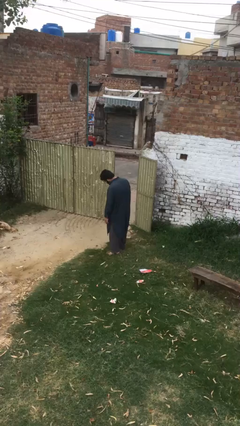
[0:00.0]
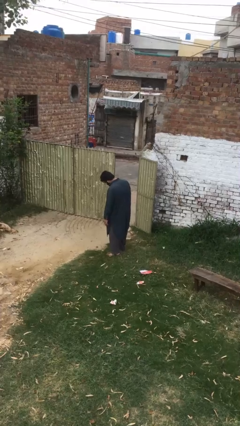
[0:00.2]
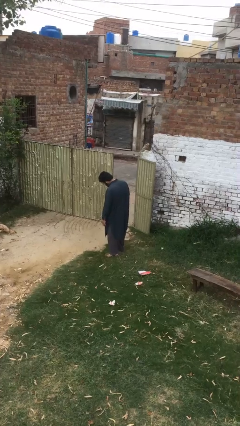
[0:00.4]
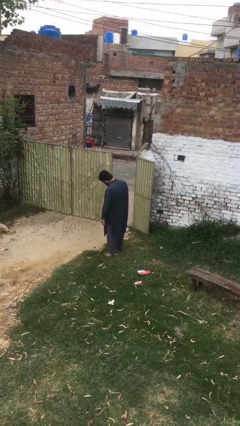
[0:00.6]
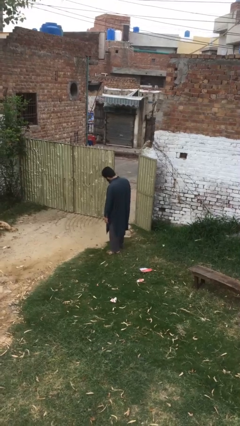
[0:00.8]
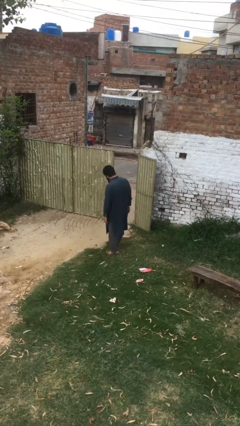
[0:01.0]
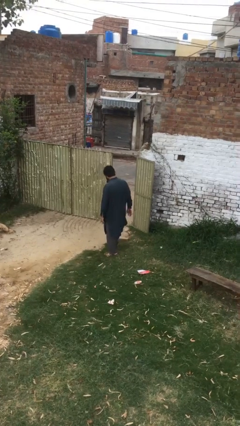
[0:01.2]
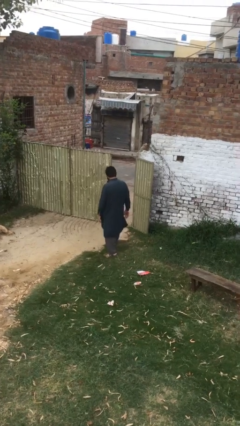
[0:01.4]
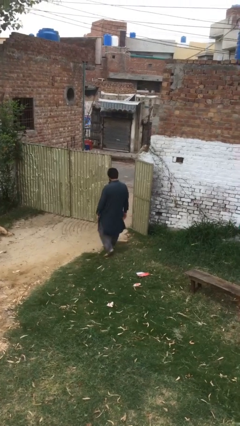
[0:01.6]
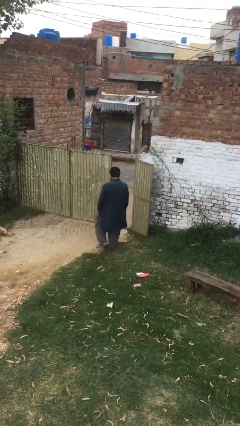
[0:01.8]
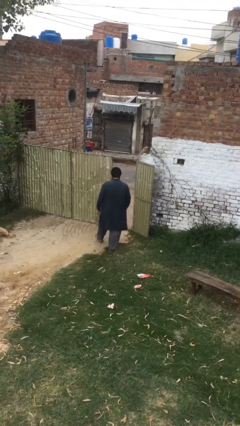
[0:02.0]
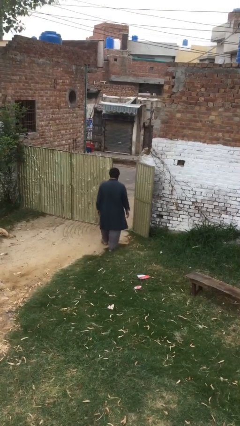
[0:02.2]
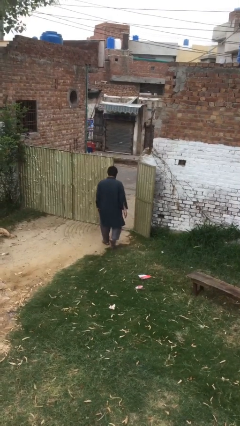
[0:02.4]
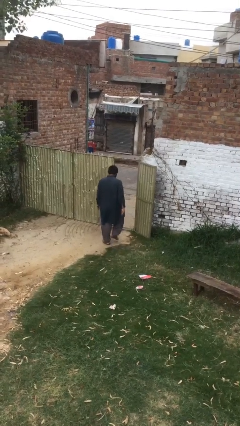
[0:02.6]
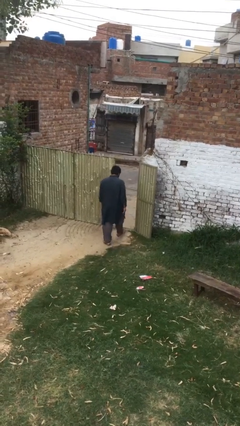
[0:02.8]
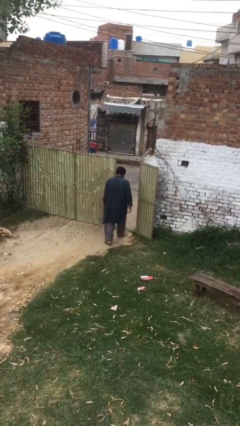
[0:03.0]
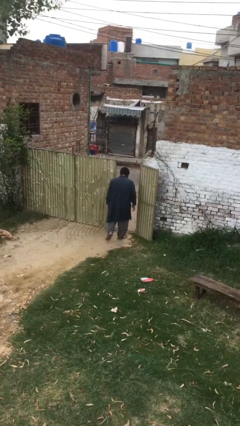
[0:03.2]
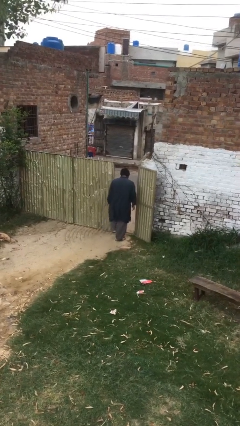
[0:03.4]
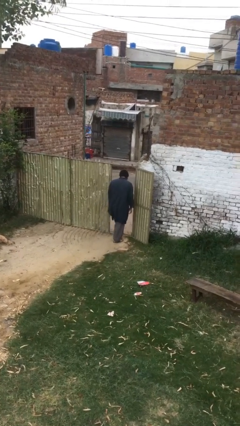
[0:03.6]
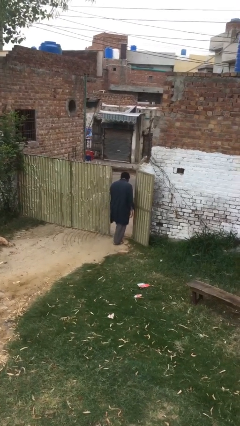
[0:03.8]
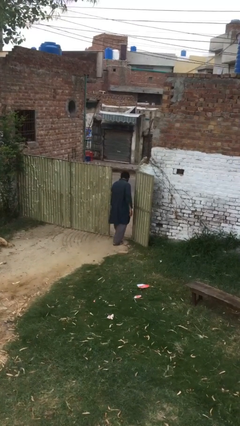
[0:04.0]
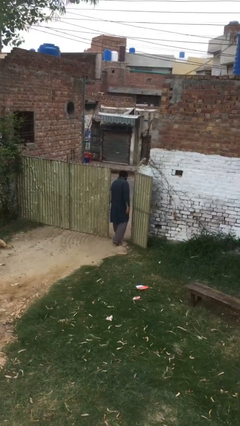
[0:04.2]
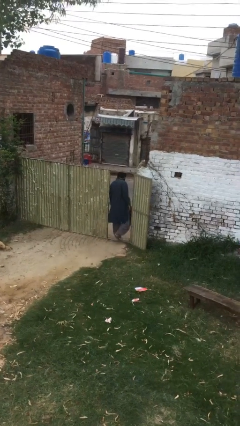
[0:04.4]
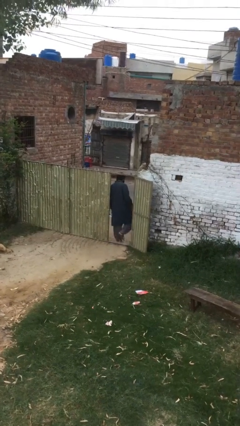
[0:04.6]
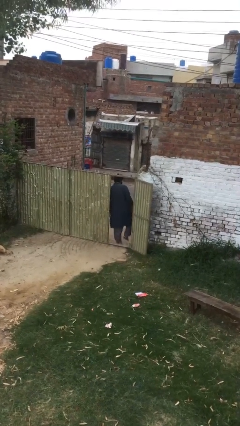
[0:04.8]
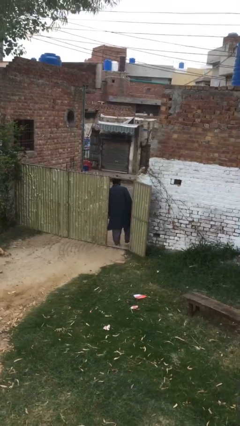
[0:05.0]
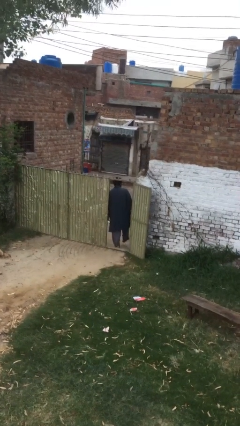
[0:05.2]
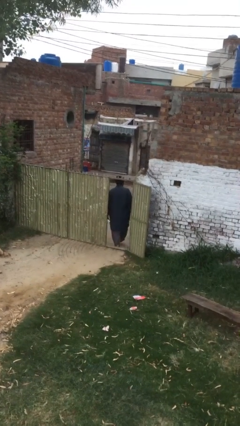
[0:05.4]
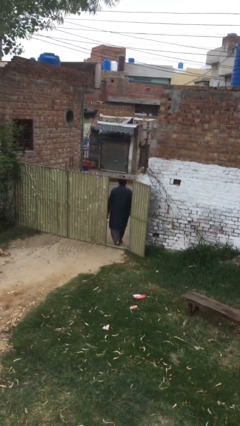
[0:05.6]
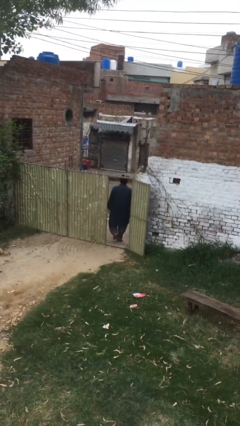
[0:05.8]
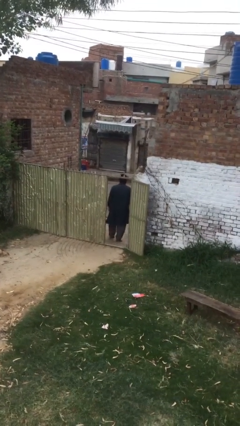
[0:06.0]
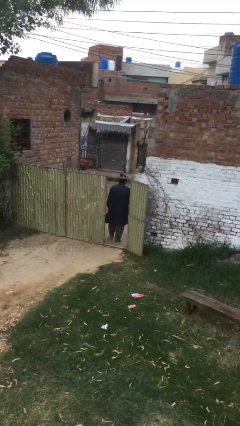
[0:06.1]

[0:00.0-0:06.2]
person exits scene through structure

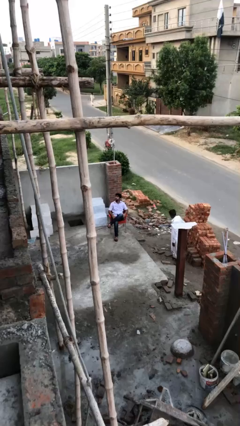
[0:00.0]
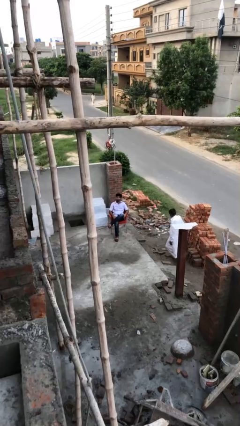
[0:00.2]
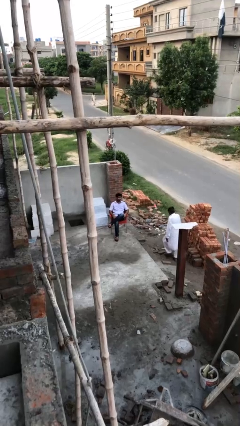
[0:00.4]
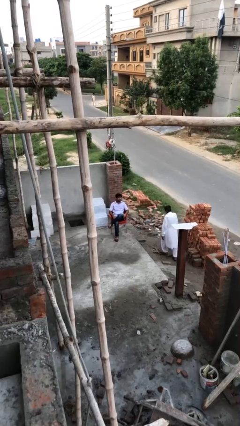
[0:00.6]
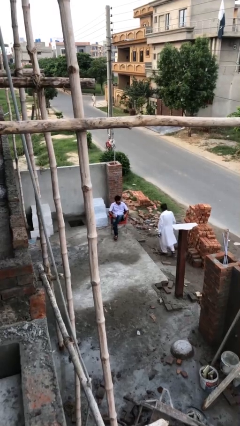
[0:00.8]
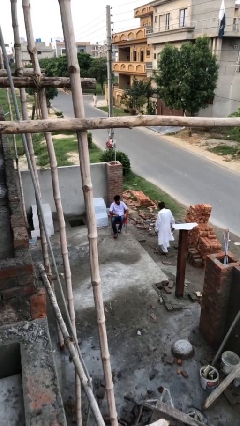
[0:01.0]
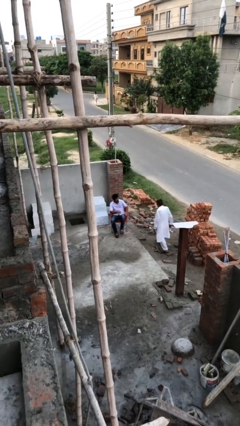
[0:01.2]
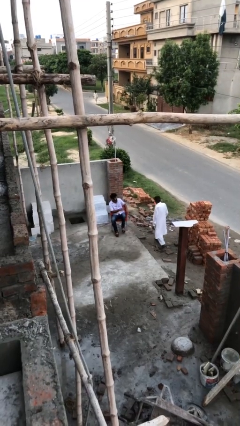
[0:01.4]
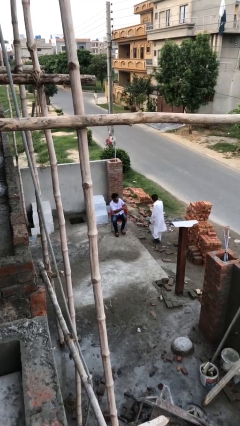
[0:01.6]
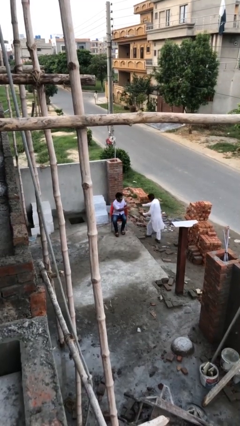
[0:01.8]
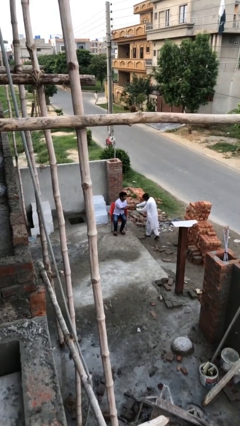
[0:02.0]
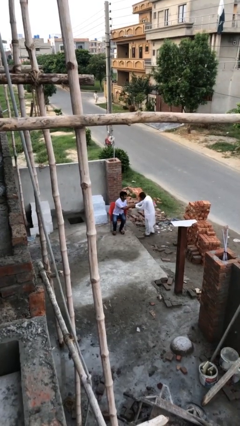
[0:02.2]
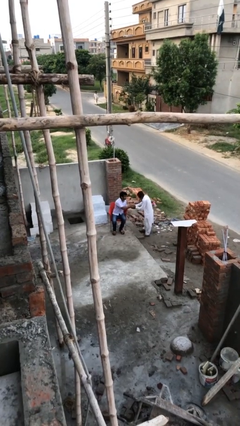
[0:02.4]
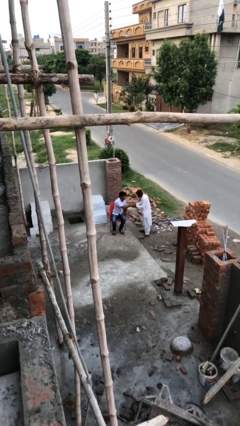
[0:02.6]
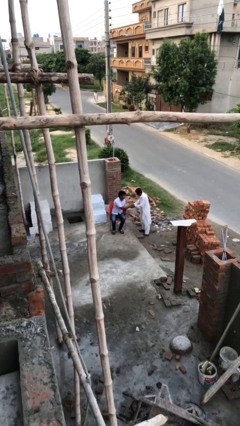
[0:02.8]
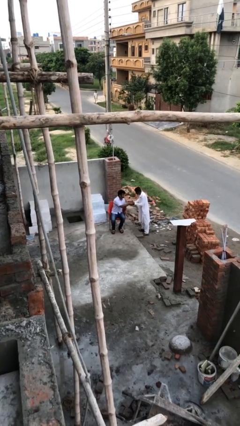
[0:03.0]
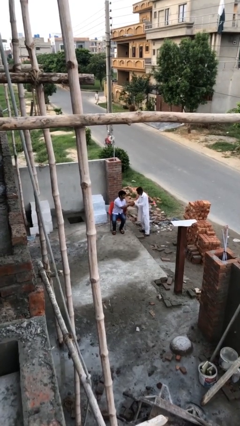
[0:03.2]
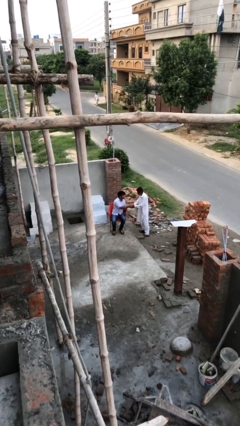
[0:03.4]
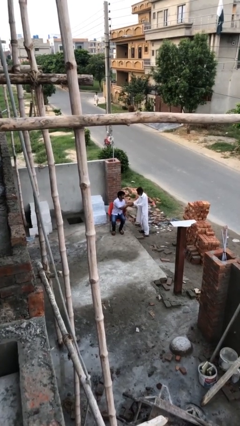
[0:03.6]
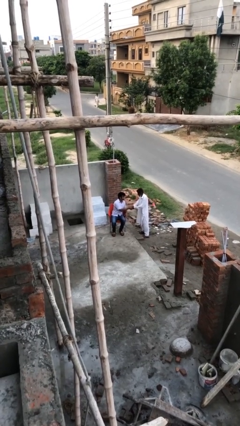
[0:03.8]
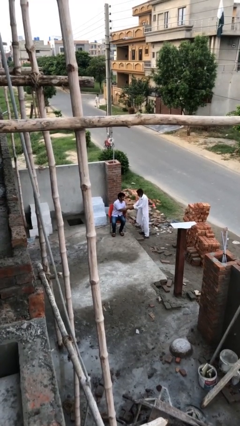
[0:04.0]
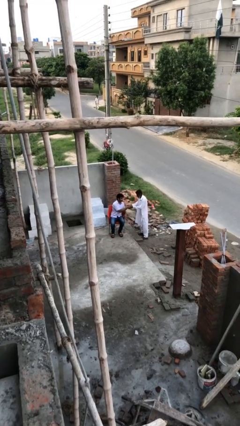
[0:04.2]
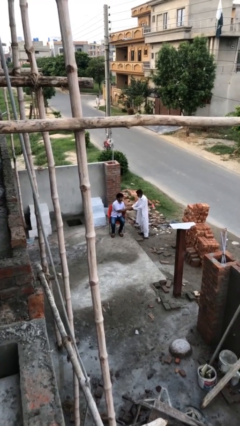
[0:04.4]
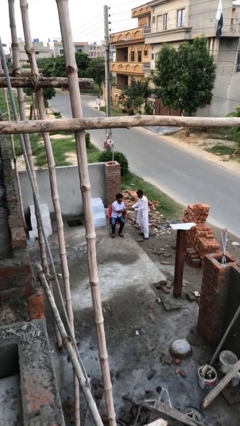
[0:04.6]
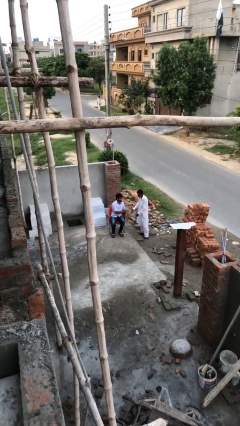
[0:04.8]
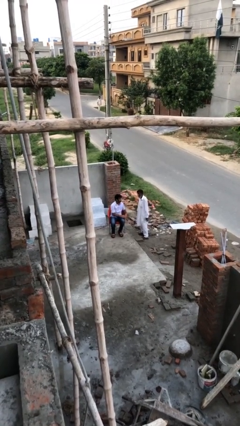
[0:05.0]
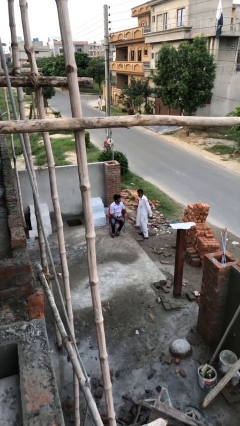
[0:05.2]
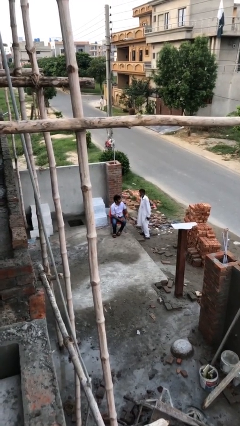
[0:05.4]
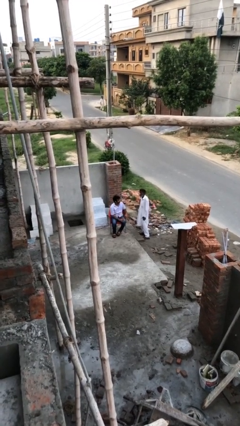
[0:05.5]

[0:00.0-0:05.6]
person shakes hand

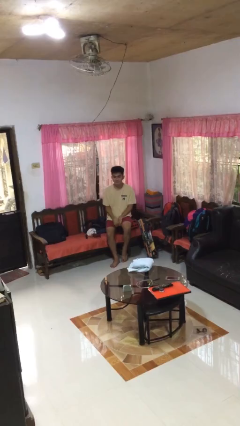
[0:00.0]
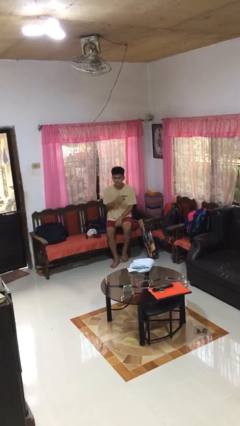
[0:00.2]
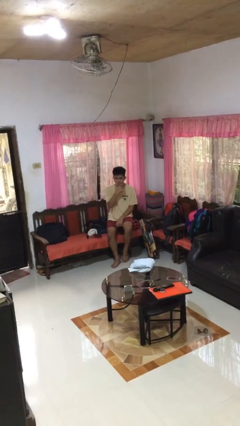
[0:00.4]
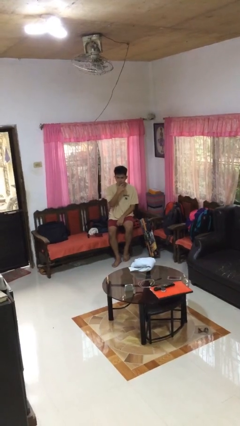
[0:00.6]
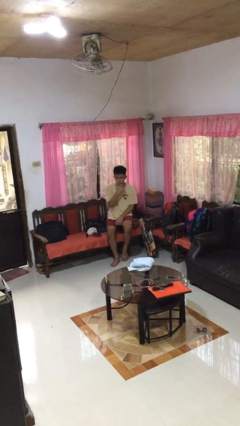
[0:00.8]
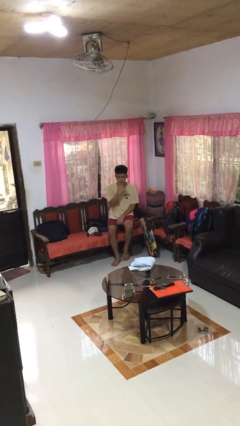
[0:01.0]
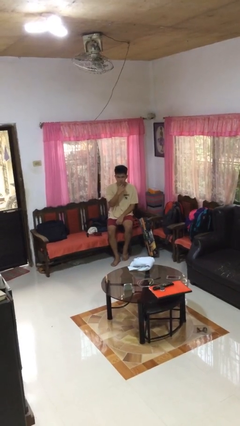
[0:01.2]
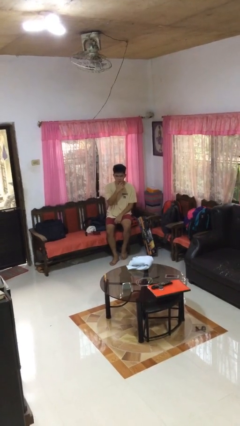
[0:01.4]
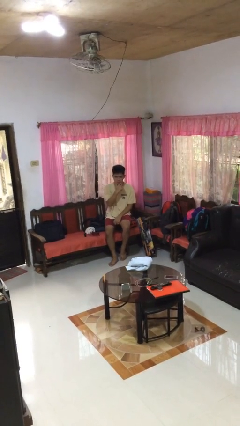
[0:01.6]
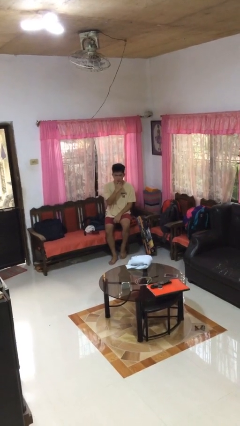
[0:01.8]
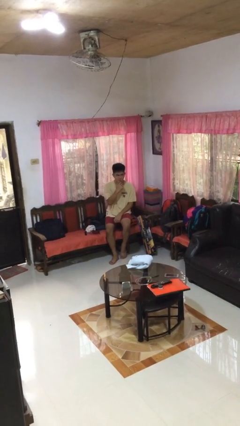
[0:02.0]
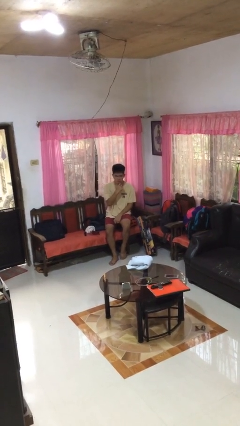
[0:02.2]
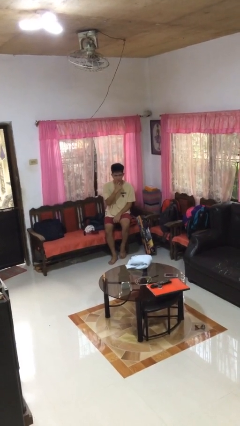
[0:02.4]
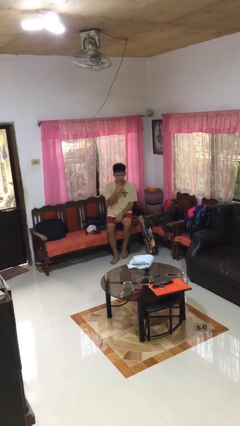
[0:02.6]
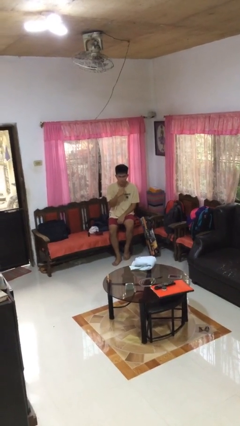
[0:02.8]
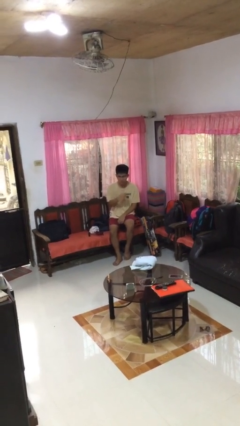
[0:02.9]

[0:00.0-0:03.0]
person strokes chin

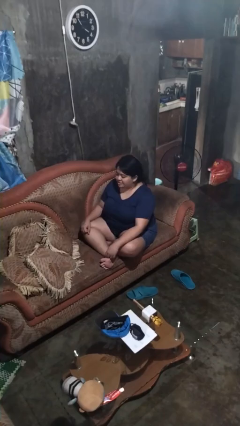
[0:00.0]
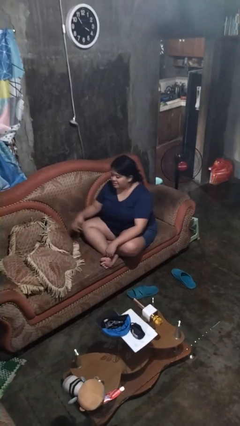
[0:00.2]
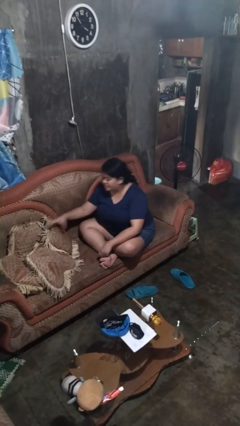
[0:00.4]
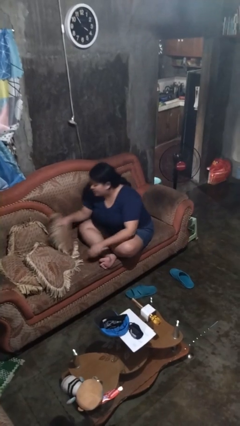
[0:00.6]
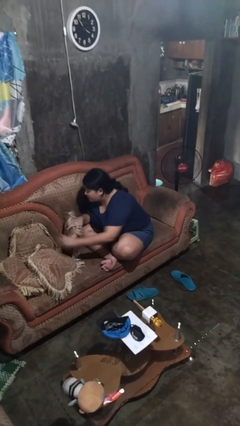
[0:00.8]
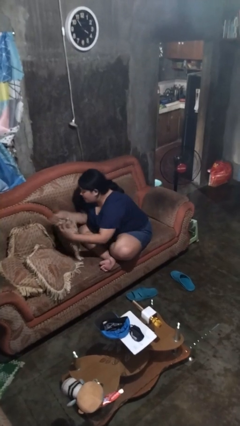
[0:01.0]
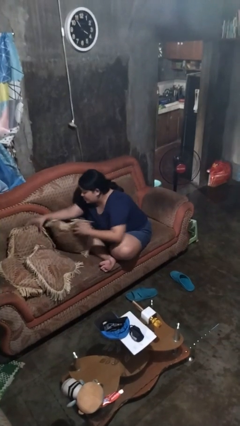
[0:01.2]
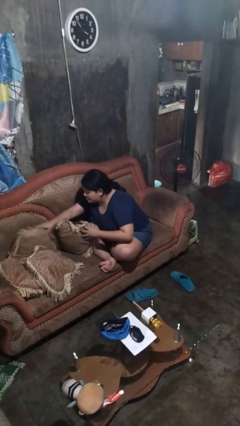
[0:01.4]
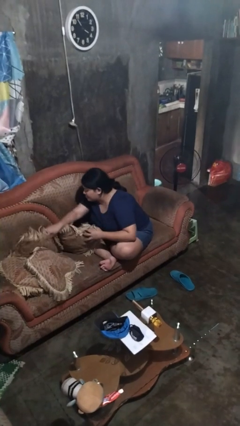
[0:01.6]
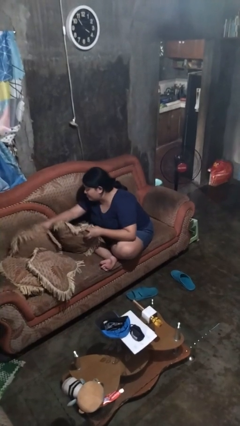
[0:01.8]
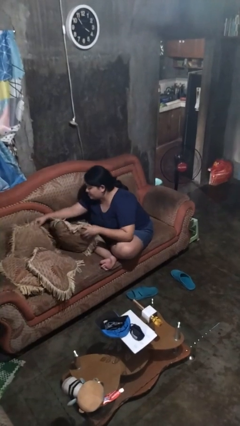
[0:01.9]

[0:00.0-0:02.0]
person searches in couch

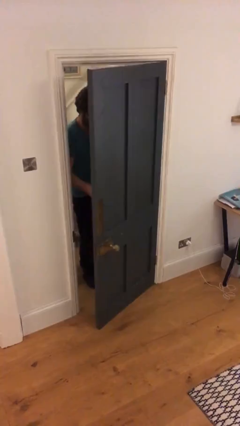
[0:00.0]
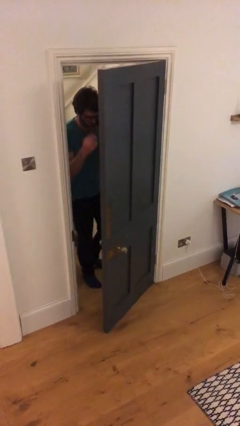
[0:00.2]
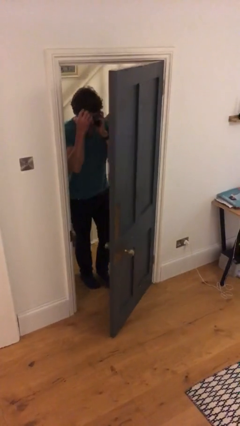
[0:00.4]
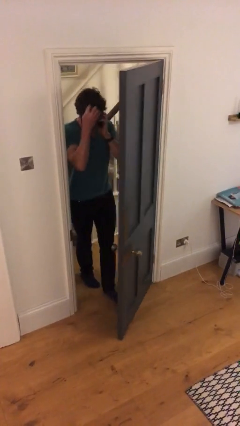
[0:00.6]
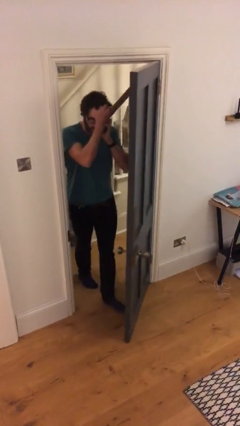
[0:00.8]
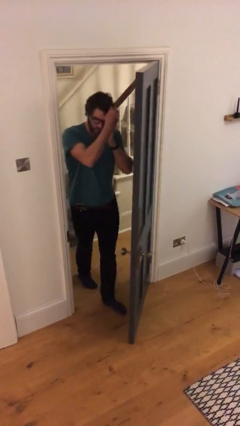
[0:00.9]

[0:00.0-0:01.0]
person opens facility door

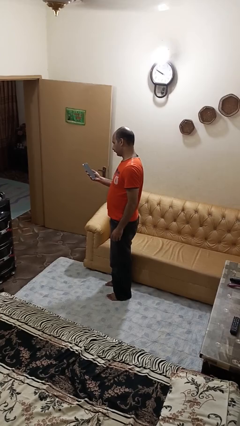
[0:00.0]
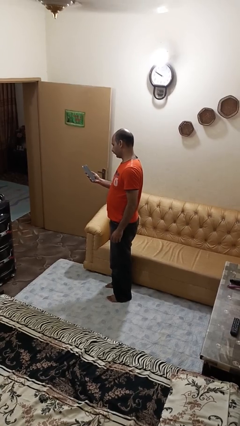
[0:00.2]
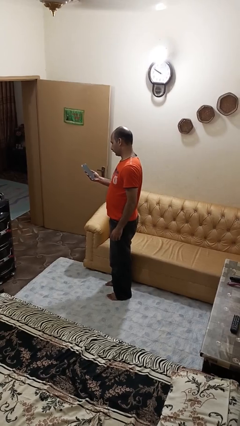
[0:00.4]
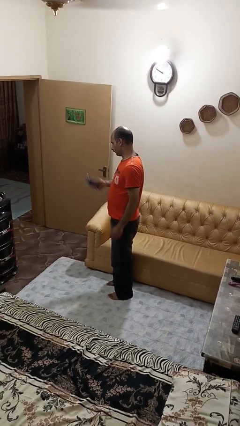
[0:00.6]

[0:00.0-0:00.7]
person puts phone into pocket
